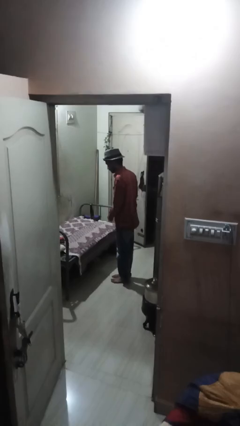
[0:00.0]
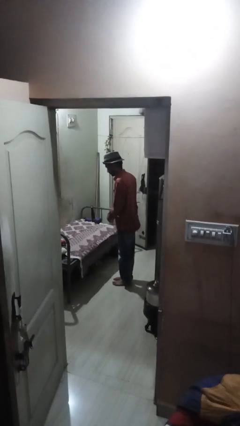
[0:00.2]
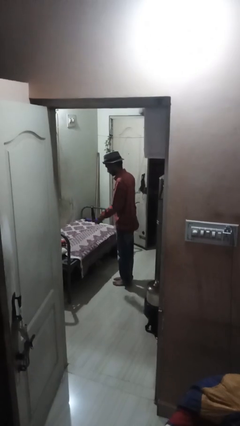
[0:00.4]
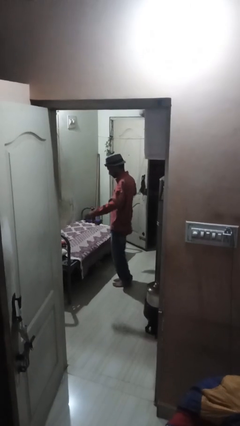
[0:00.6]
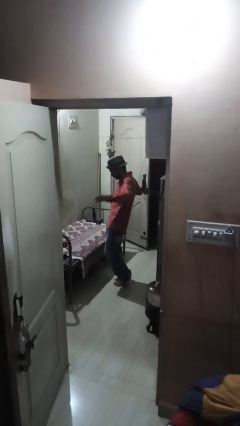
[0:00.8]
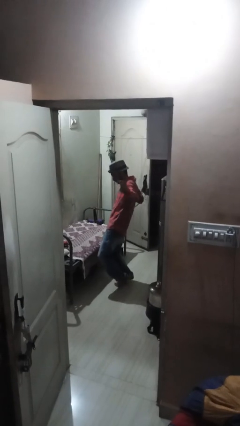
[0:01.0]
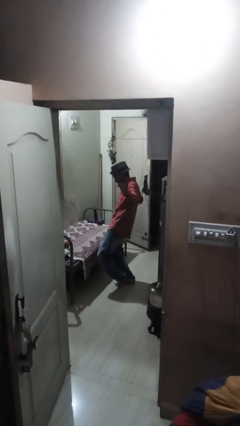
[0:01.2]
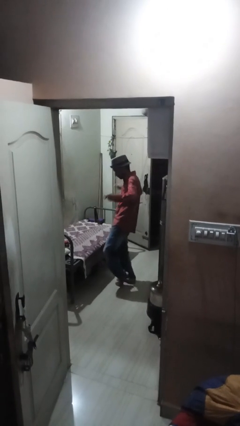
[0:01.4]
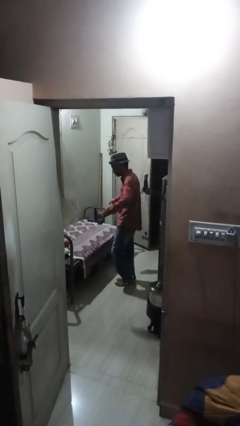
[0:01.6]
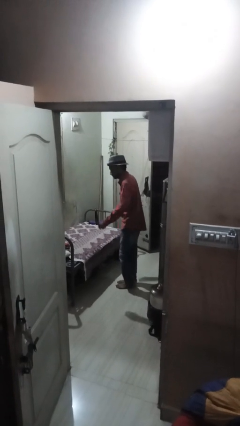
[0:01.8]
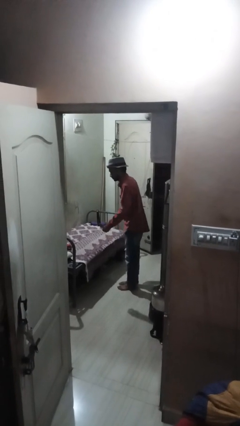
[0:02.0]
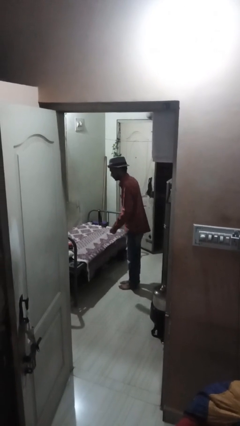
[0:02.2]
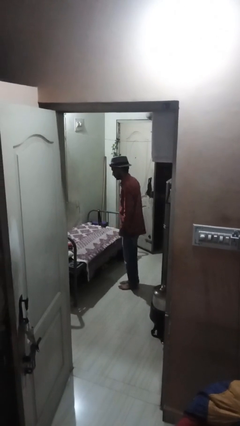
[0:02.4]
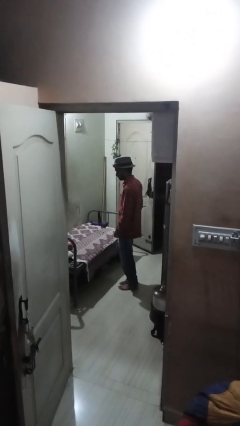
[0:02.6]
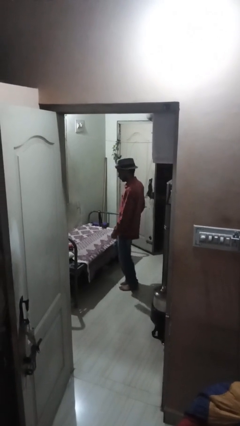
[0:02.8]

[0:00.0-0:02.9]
person dances in place

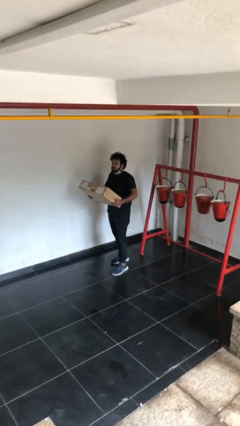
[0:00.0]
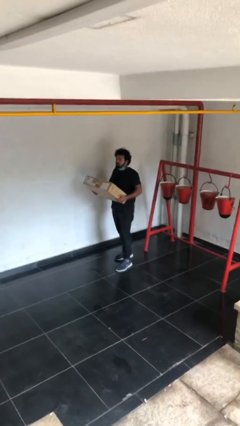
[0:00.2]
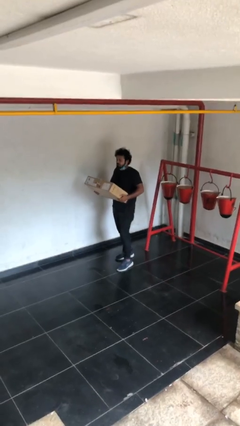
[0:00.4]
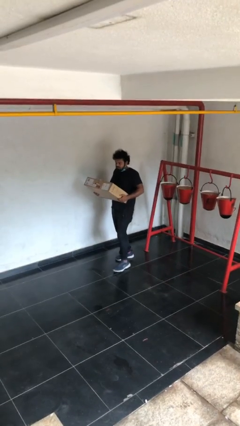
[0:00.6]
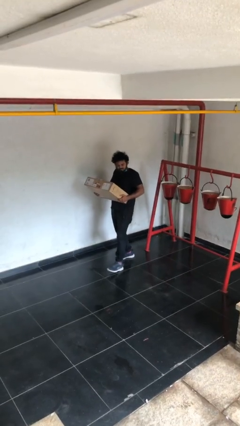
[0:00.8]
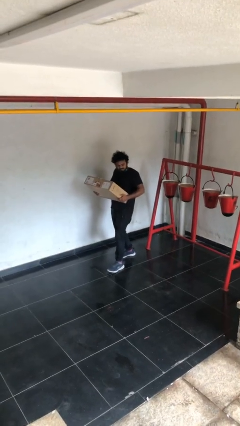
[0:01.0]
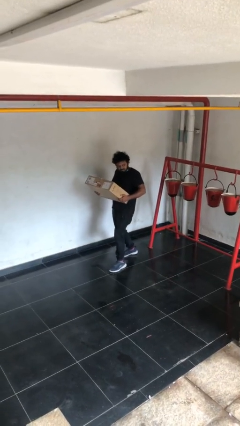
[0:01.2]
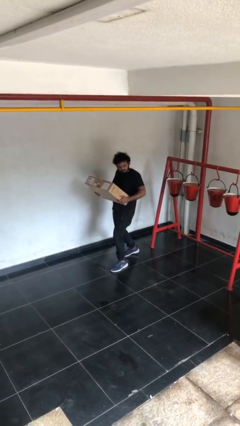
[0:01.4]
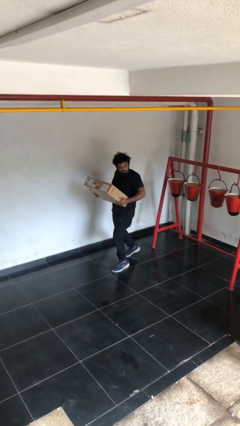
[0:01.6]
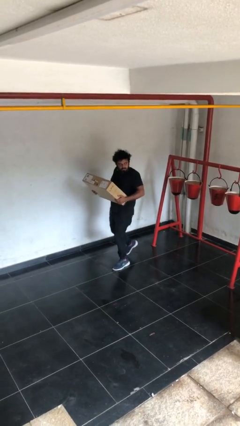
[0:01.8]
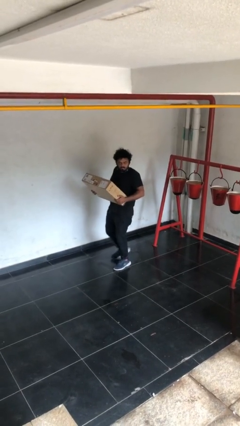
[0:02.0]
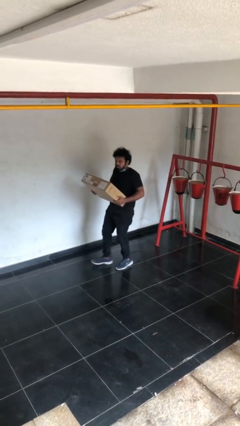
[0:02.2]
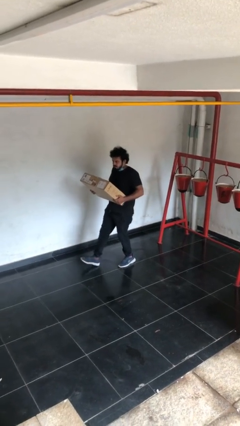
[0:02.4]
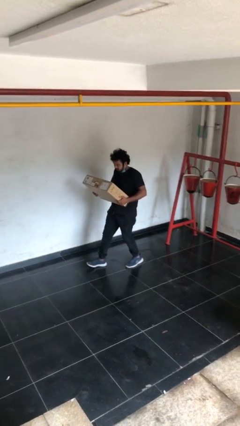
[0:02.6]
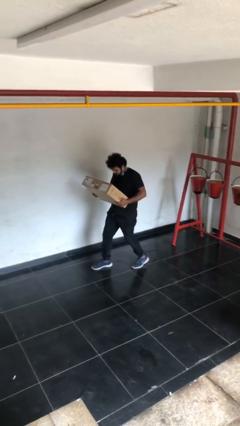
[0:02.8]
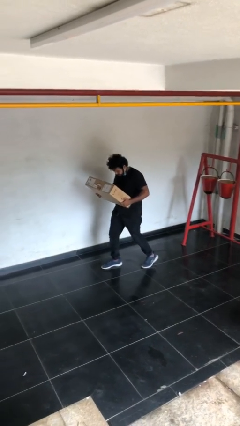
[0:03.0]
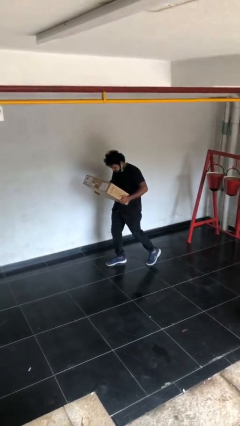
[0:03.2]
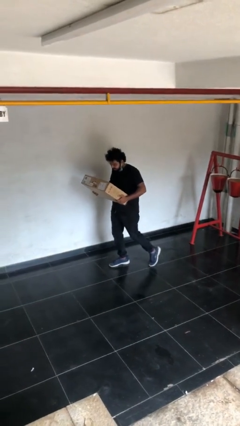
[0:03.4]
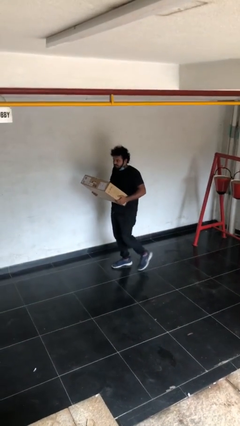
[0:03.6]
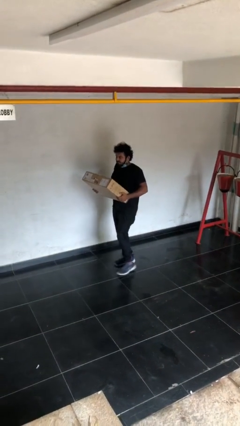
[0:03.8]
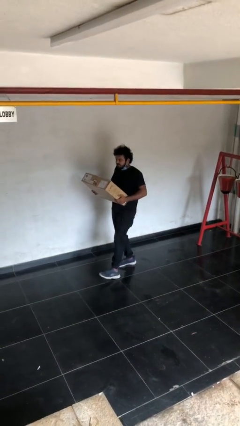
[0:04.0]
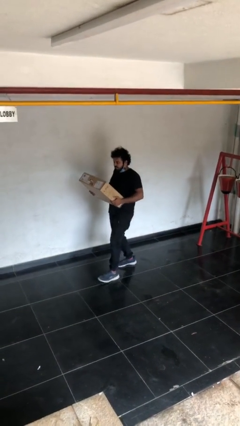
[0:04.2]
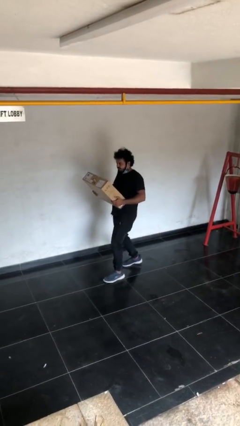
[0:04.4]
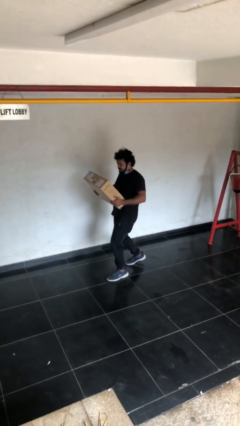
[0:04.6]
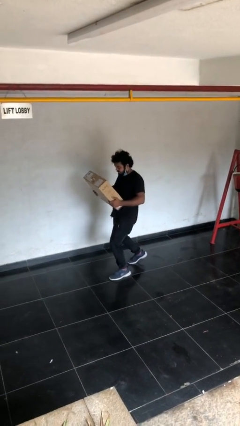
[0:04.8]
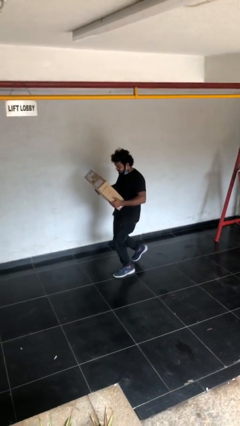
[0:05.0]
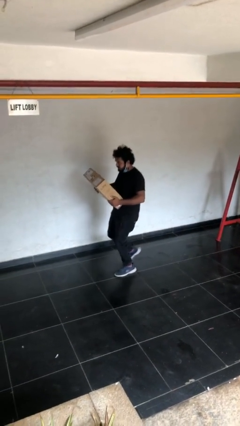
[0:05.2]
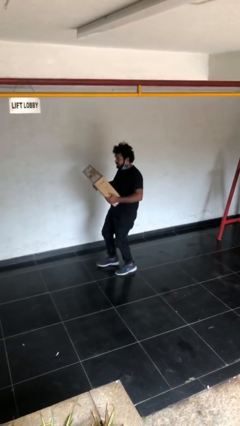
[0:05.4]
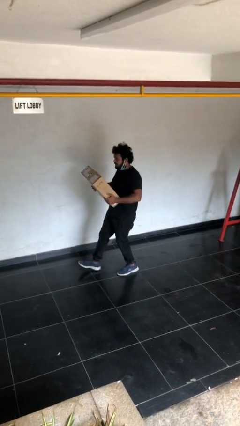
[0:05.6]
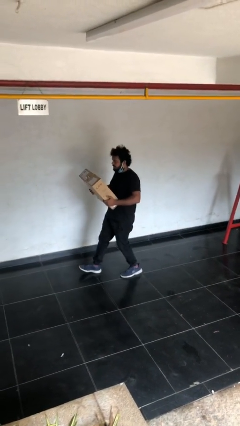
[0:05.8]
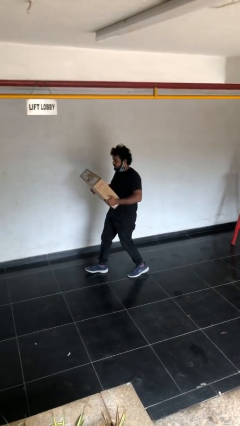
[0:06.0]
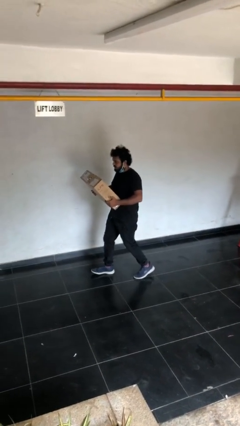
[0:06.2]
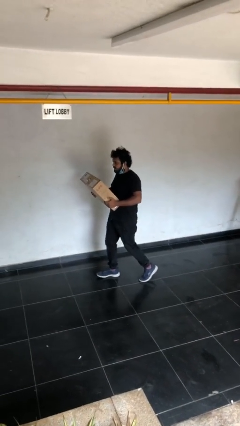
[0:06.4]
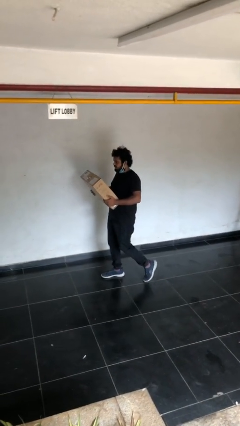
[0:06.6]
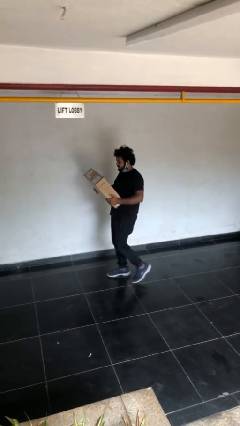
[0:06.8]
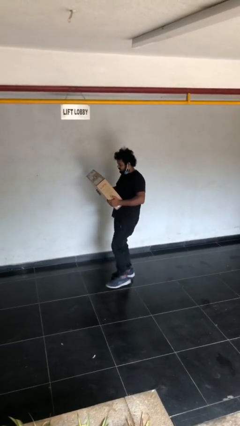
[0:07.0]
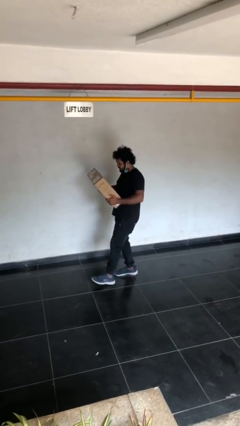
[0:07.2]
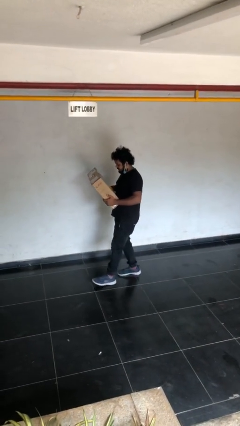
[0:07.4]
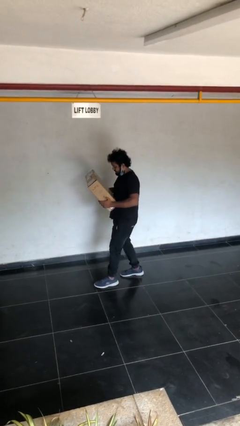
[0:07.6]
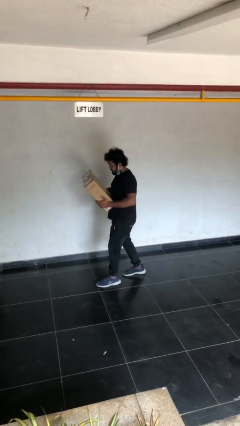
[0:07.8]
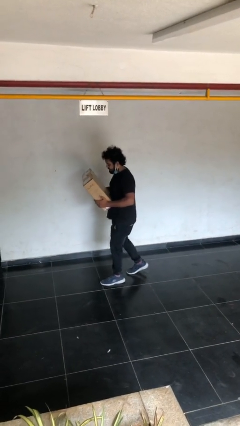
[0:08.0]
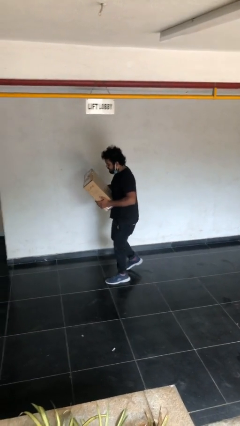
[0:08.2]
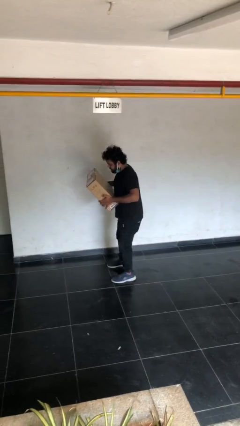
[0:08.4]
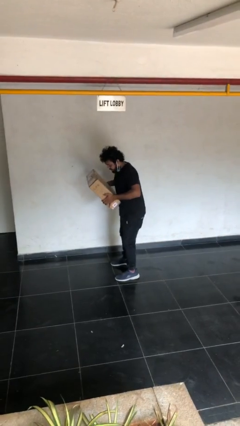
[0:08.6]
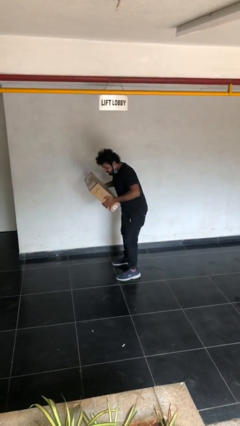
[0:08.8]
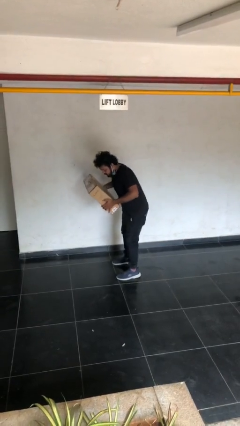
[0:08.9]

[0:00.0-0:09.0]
person carries heavy object

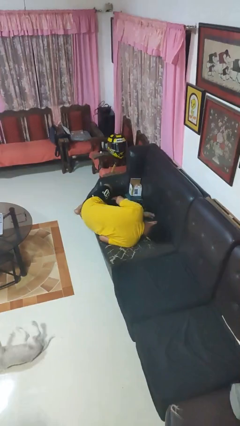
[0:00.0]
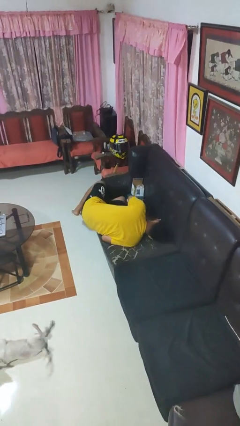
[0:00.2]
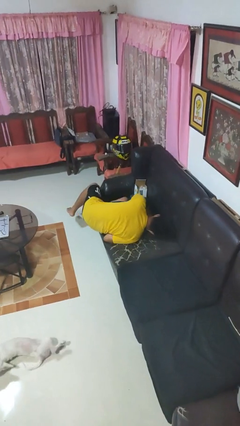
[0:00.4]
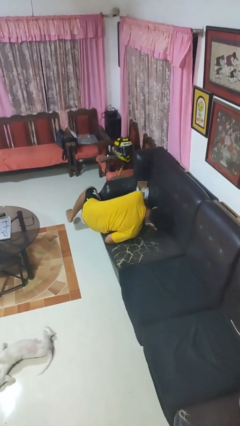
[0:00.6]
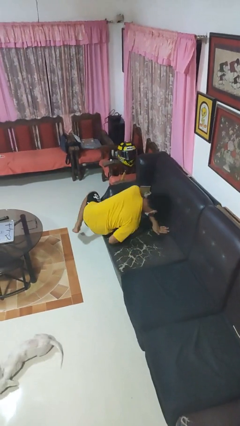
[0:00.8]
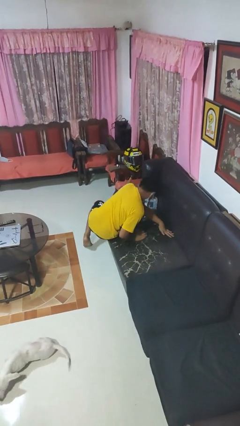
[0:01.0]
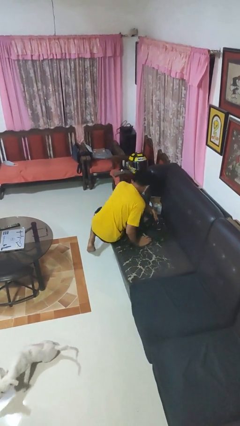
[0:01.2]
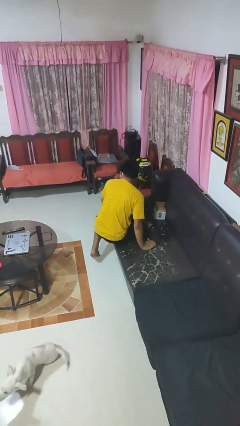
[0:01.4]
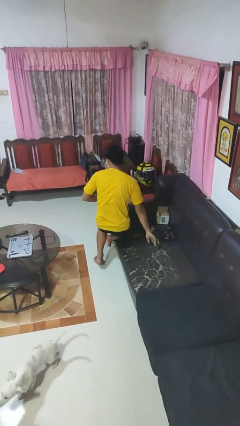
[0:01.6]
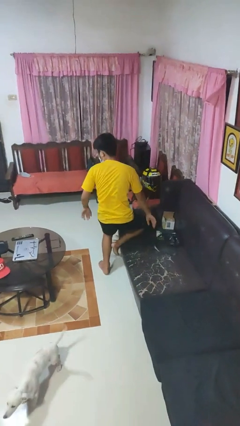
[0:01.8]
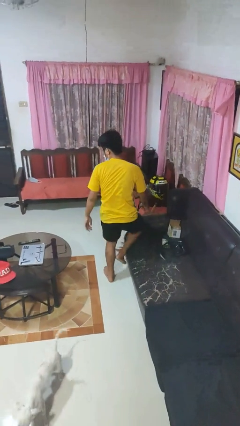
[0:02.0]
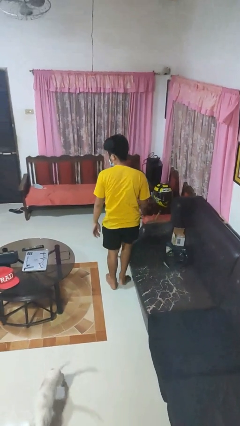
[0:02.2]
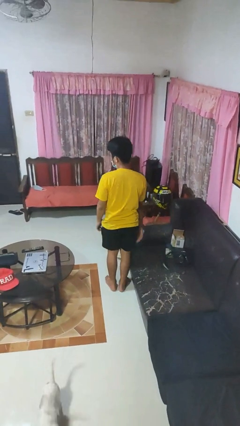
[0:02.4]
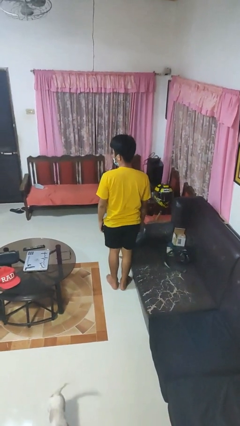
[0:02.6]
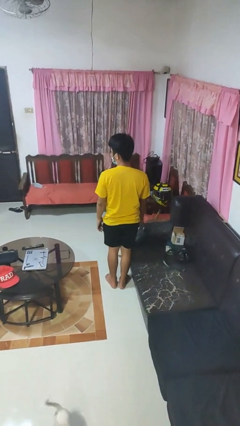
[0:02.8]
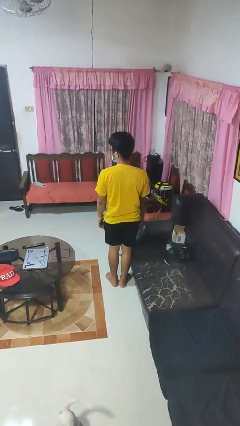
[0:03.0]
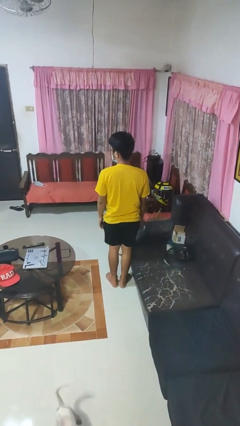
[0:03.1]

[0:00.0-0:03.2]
person stands up

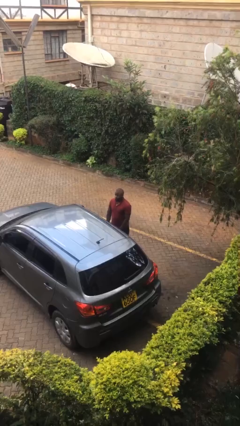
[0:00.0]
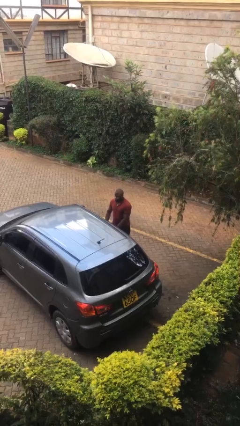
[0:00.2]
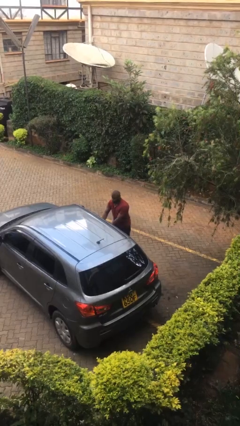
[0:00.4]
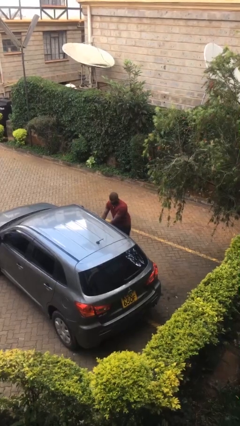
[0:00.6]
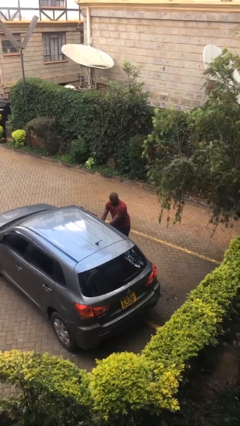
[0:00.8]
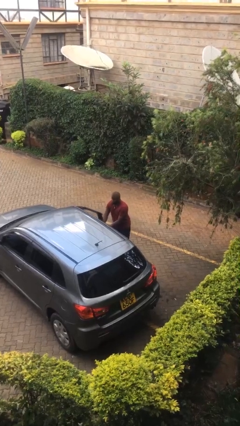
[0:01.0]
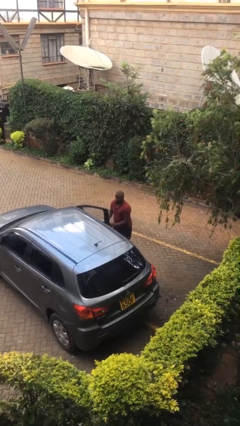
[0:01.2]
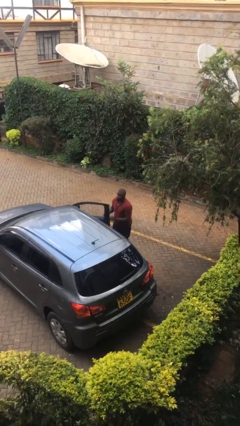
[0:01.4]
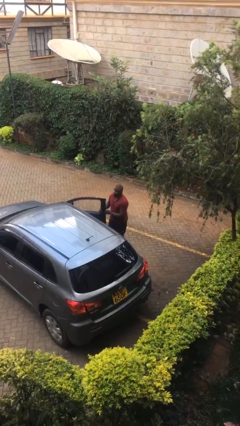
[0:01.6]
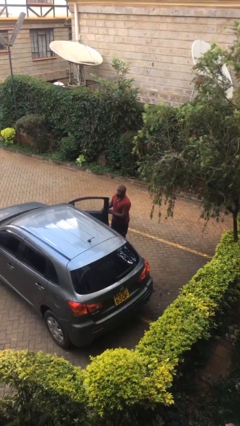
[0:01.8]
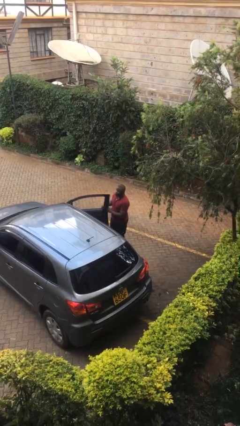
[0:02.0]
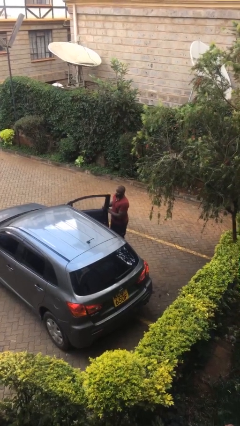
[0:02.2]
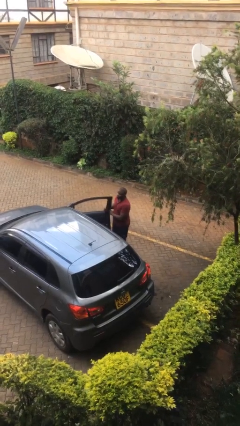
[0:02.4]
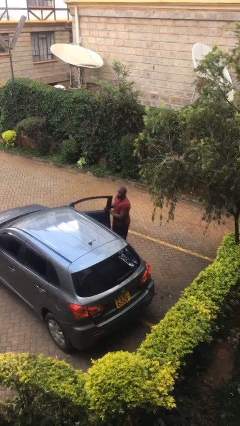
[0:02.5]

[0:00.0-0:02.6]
person opens car door
